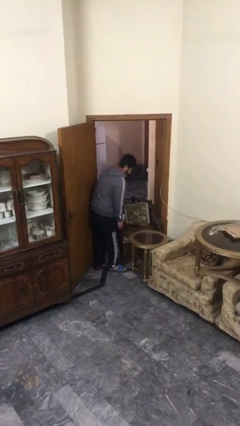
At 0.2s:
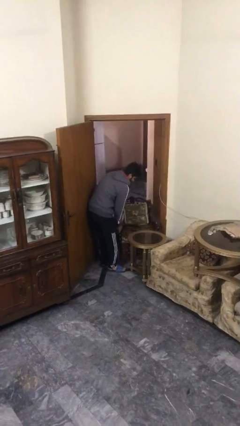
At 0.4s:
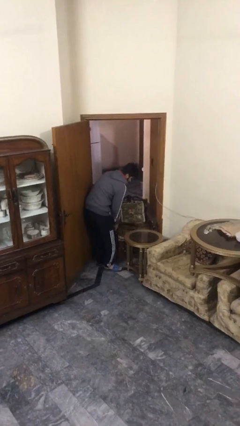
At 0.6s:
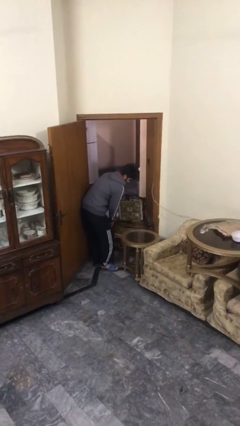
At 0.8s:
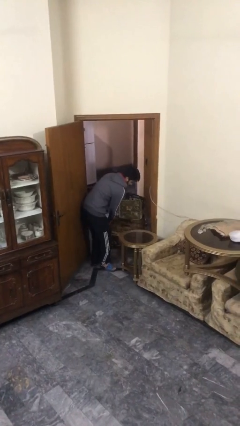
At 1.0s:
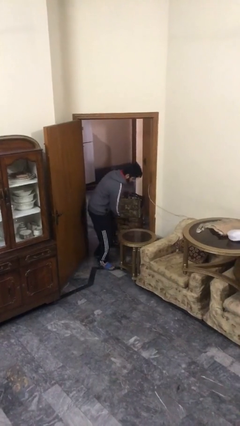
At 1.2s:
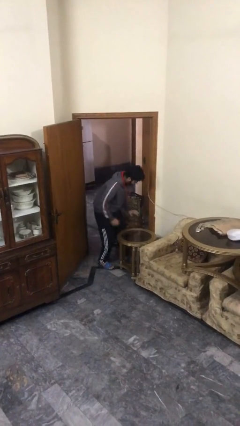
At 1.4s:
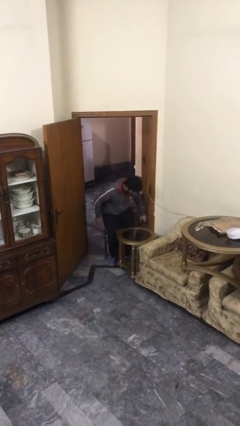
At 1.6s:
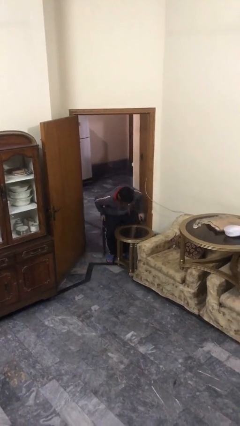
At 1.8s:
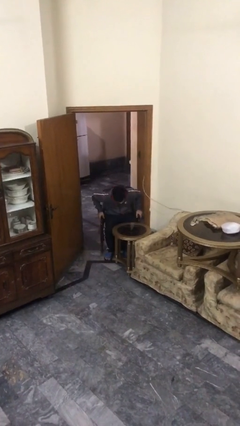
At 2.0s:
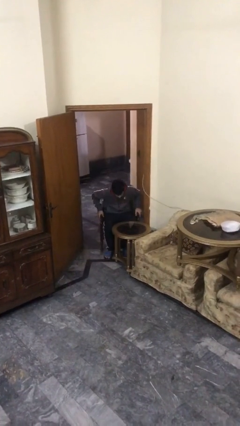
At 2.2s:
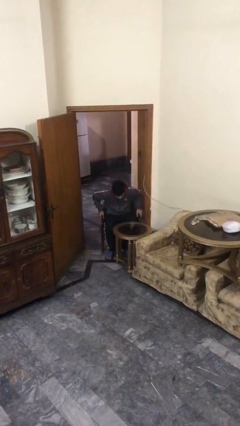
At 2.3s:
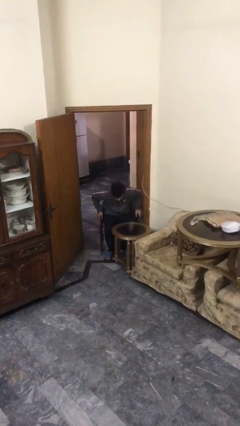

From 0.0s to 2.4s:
person sits down

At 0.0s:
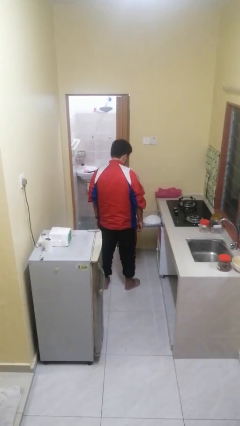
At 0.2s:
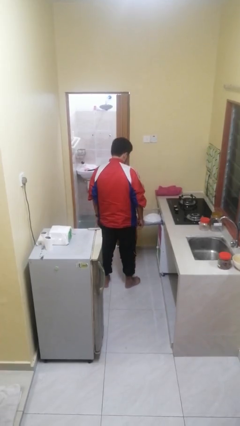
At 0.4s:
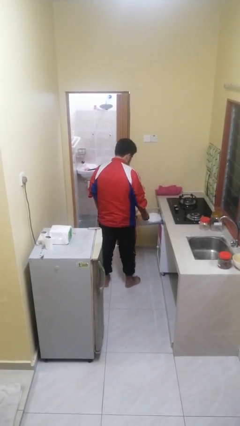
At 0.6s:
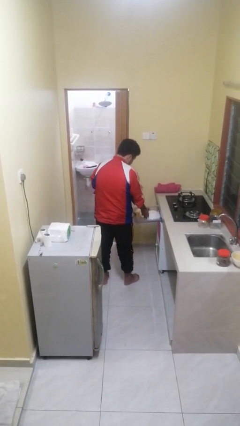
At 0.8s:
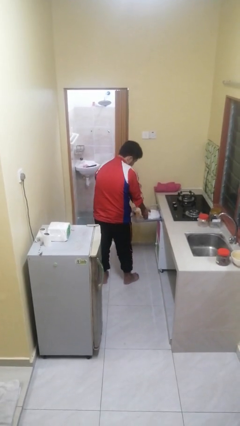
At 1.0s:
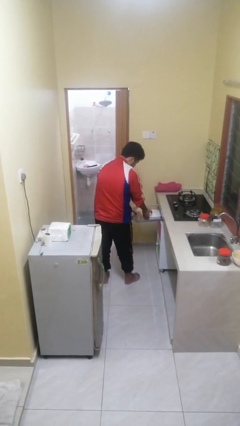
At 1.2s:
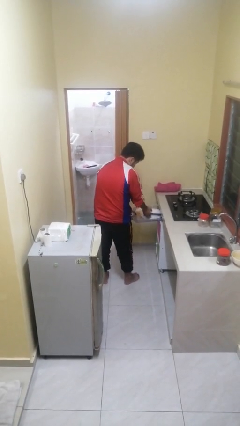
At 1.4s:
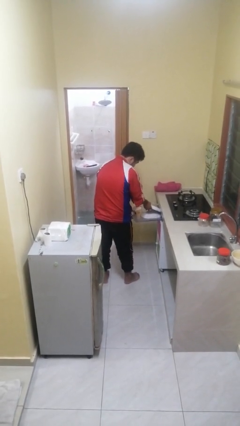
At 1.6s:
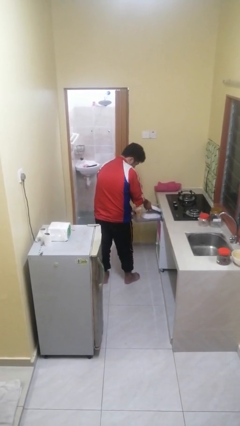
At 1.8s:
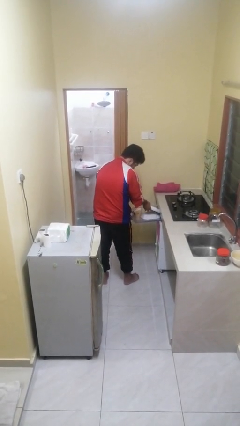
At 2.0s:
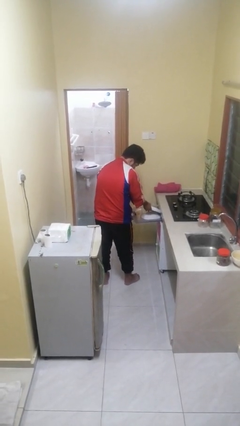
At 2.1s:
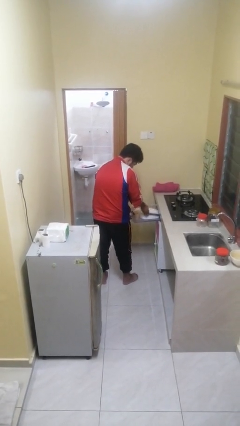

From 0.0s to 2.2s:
person searches in kitchen drawer

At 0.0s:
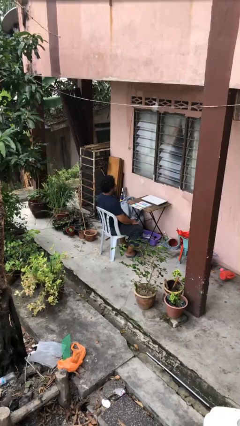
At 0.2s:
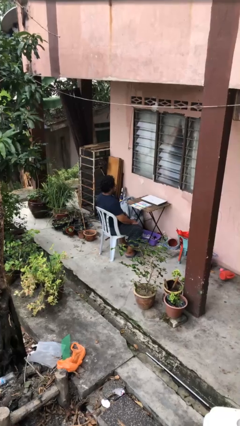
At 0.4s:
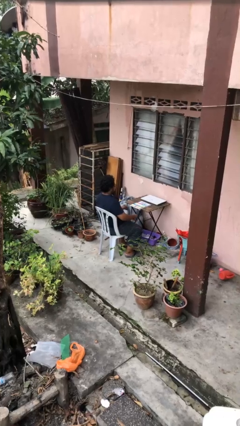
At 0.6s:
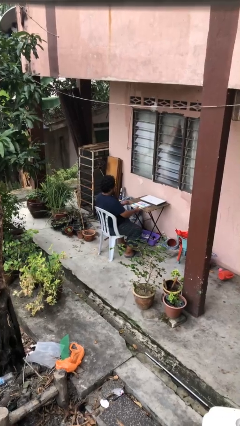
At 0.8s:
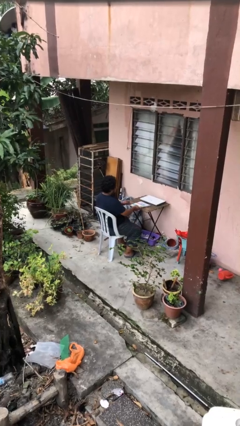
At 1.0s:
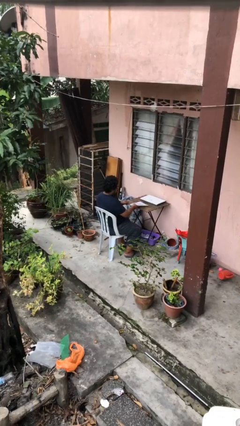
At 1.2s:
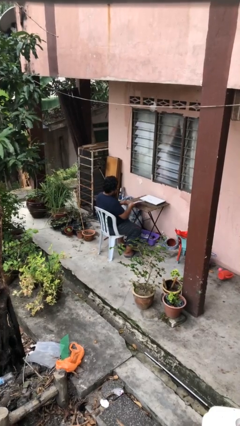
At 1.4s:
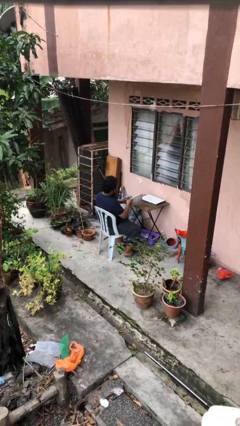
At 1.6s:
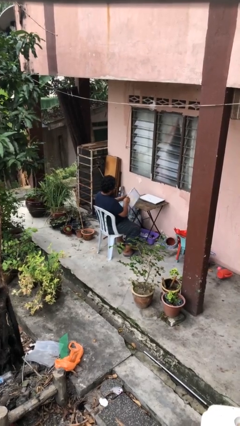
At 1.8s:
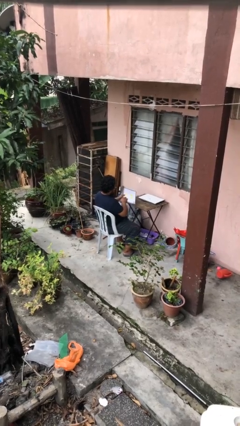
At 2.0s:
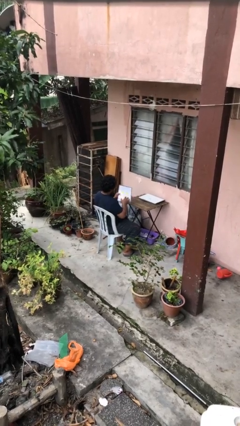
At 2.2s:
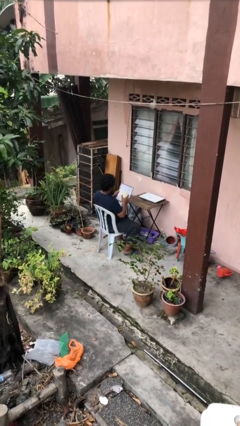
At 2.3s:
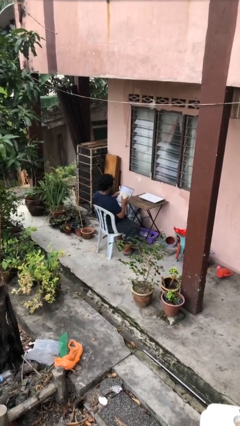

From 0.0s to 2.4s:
person picks up object from table

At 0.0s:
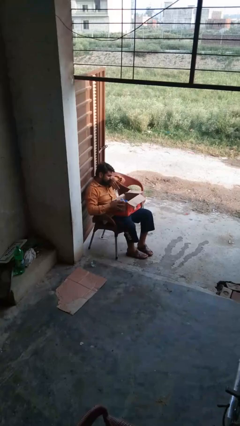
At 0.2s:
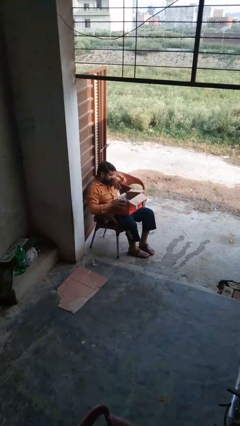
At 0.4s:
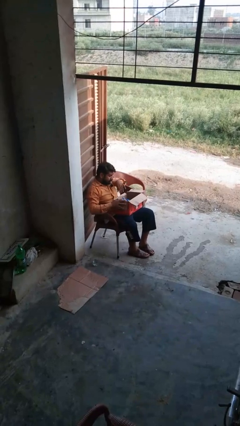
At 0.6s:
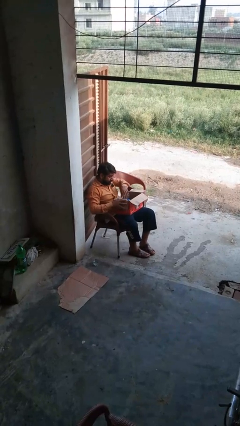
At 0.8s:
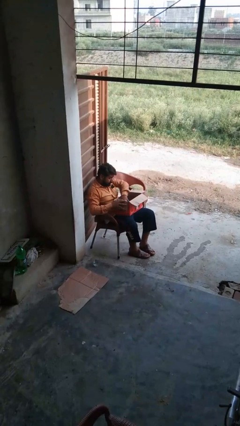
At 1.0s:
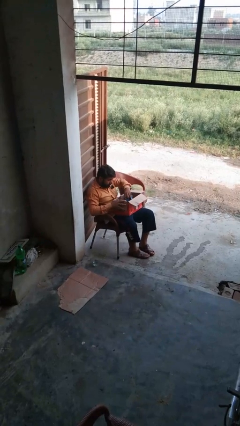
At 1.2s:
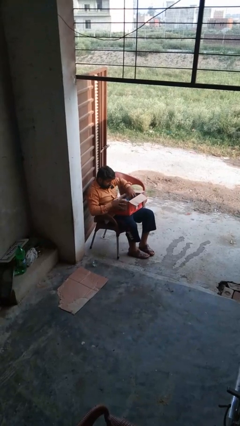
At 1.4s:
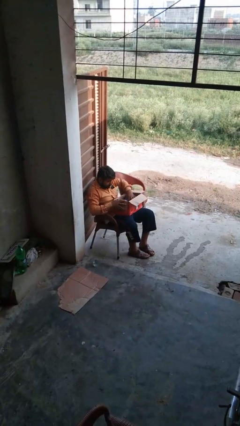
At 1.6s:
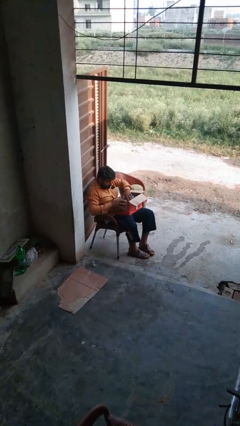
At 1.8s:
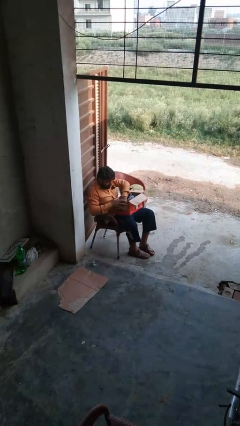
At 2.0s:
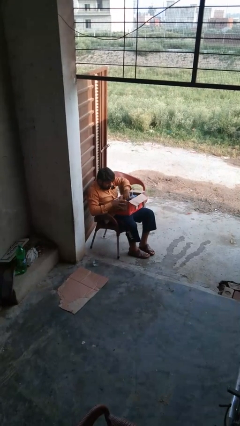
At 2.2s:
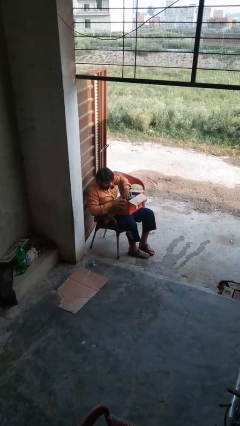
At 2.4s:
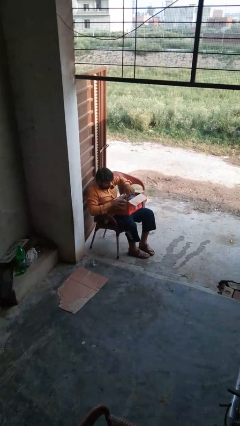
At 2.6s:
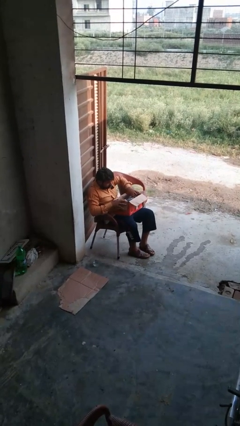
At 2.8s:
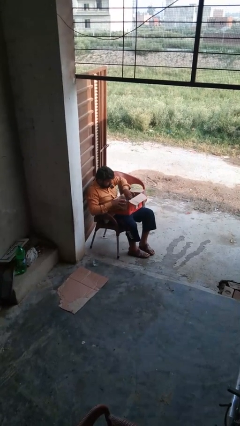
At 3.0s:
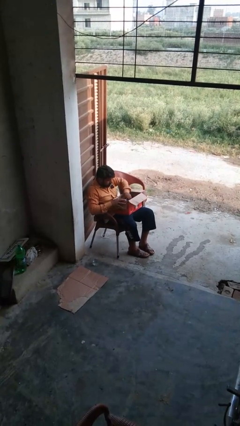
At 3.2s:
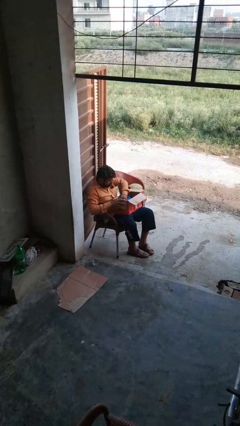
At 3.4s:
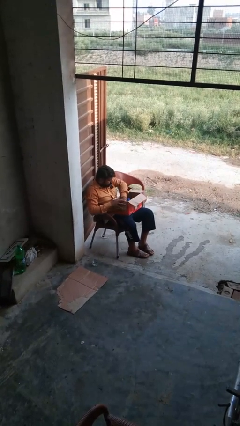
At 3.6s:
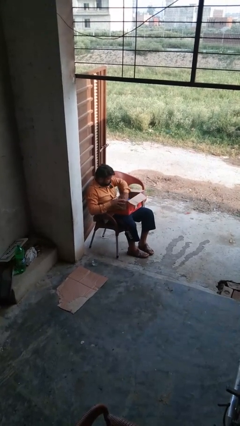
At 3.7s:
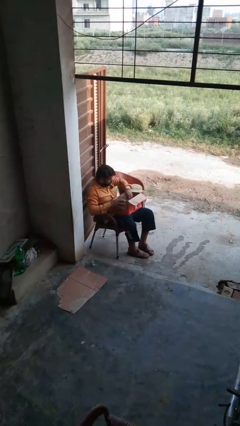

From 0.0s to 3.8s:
person searches in cabinet

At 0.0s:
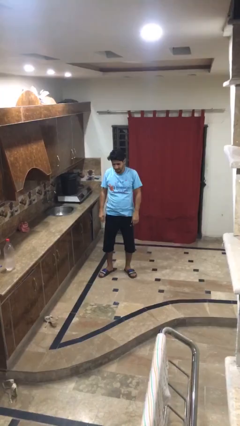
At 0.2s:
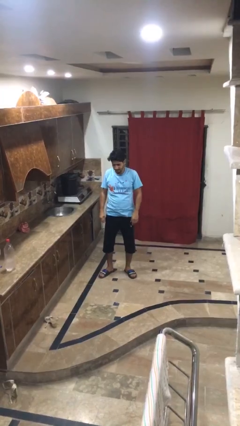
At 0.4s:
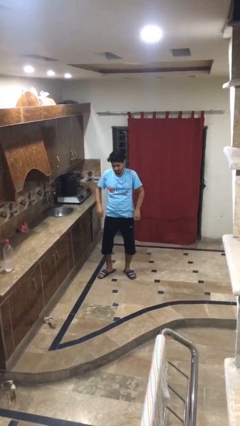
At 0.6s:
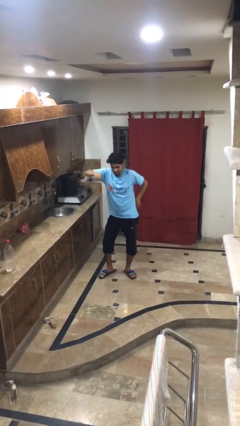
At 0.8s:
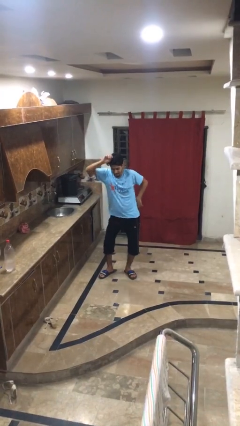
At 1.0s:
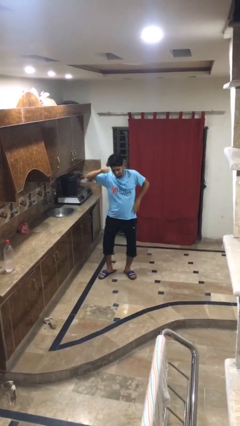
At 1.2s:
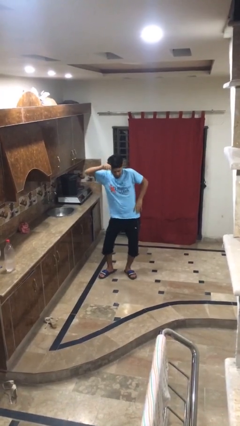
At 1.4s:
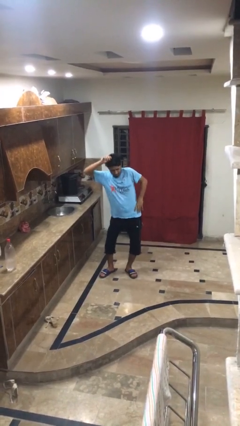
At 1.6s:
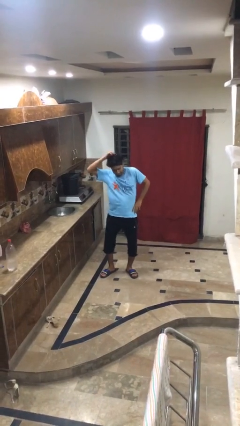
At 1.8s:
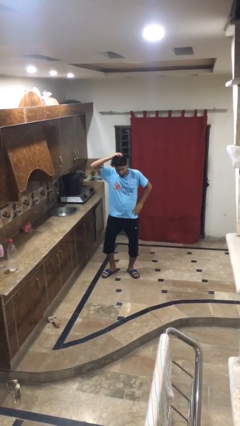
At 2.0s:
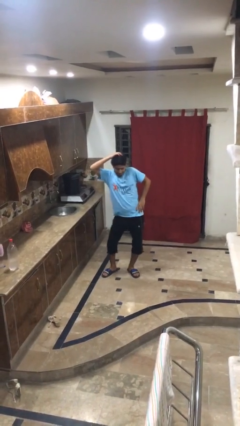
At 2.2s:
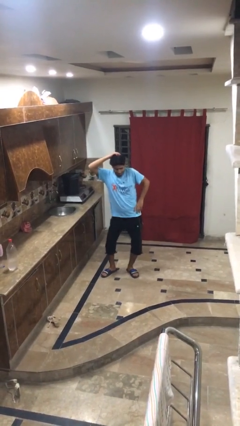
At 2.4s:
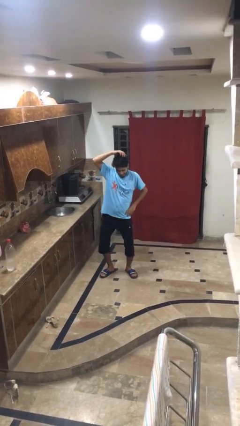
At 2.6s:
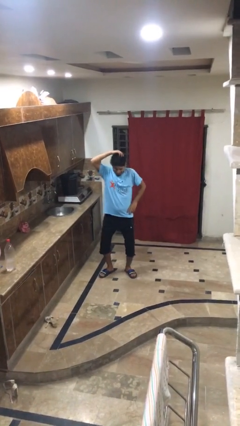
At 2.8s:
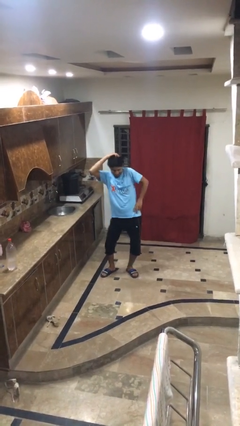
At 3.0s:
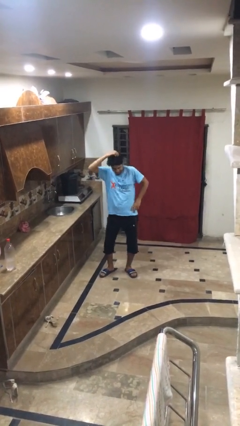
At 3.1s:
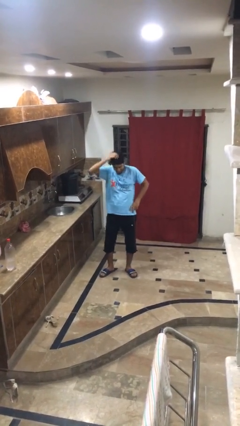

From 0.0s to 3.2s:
person dances in place

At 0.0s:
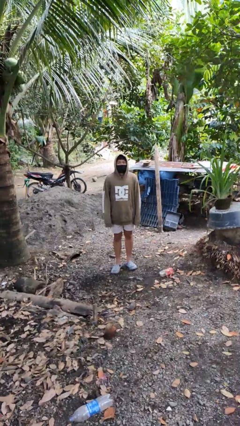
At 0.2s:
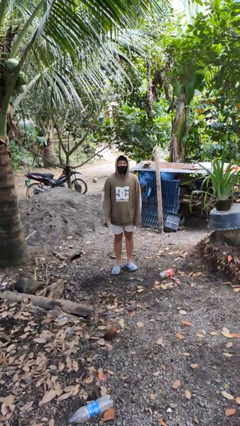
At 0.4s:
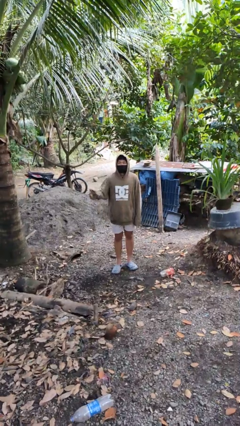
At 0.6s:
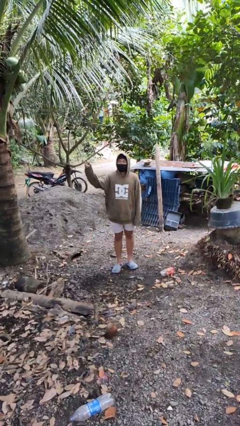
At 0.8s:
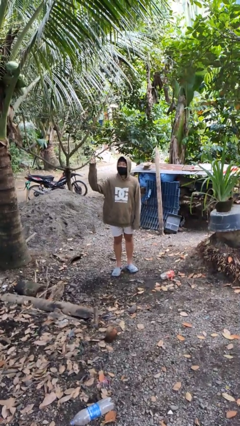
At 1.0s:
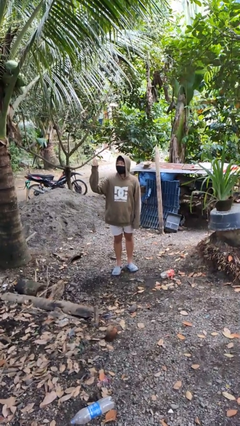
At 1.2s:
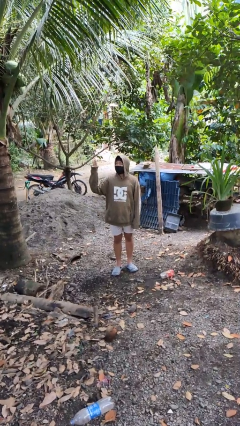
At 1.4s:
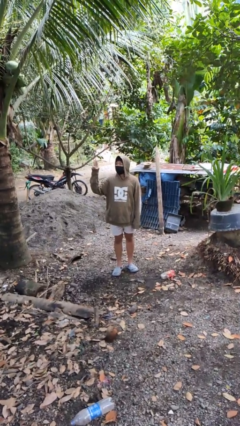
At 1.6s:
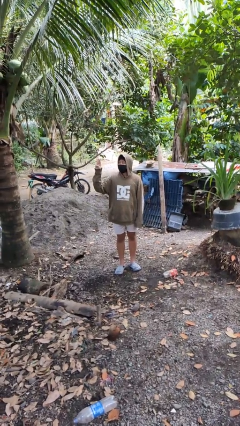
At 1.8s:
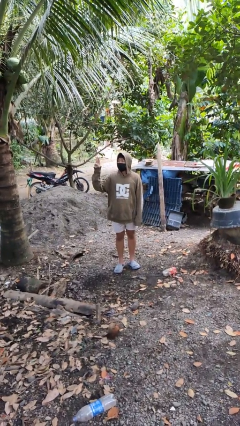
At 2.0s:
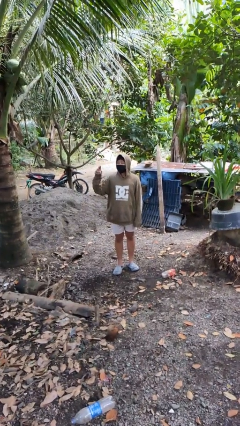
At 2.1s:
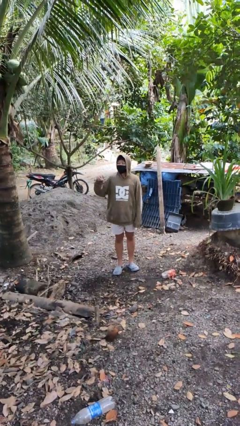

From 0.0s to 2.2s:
person gestures number three

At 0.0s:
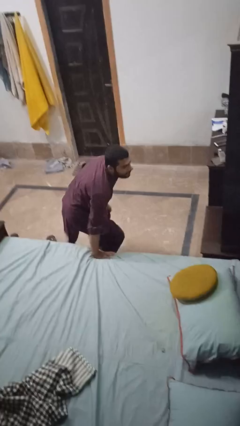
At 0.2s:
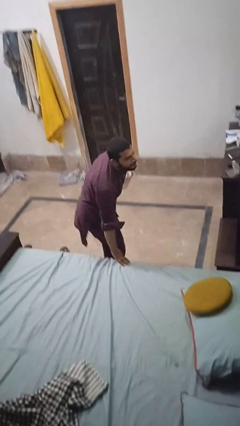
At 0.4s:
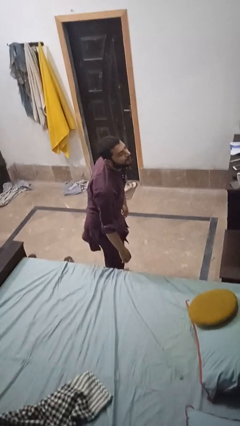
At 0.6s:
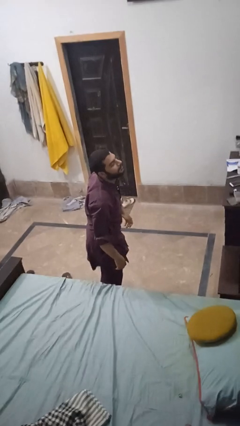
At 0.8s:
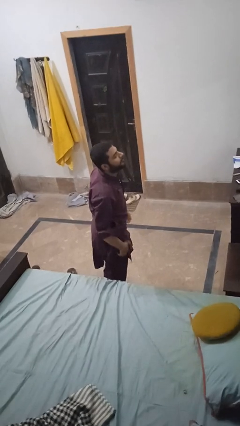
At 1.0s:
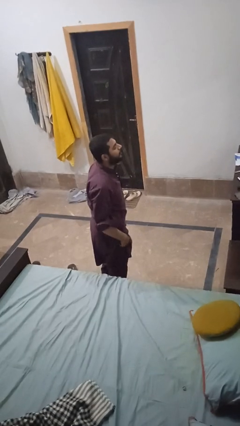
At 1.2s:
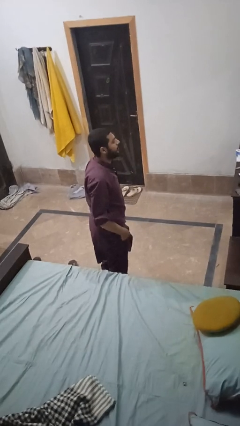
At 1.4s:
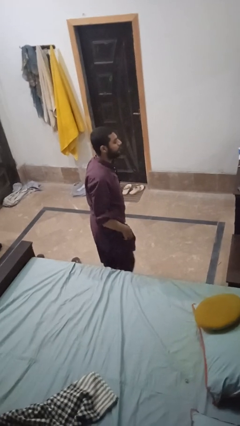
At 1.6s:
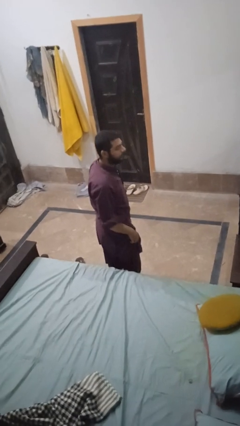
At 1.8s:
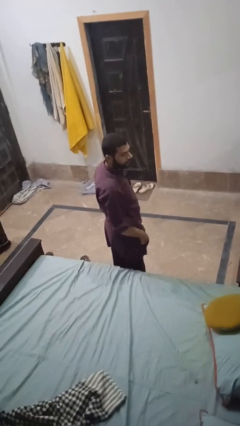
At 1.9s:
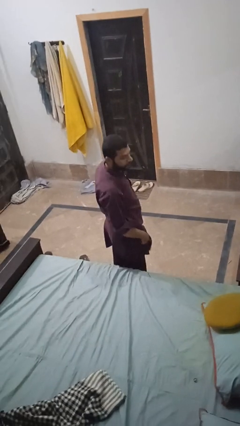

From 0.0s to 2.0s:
person stands up from floor
